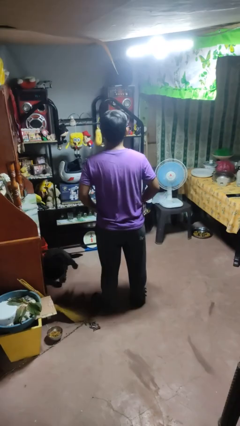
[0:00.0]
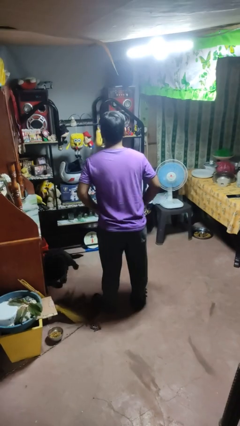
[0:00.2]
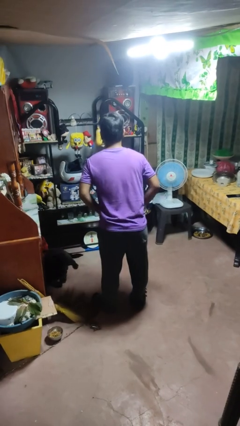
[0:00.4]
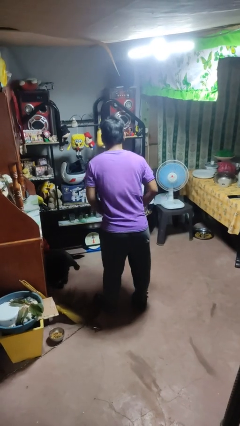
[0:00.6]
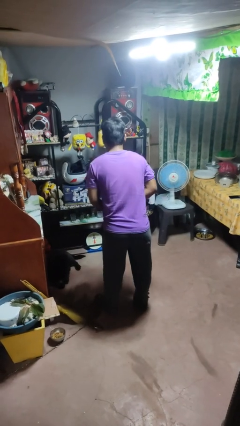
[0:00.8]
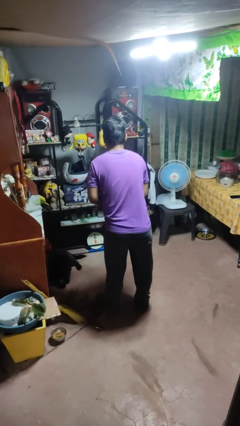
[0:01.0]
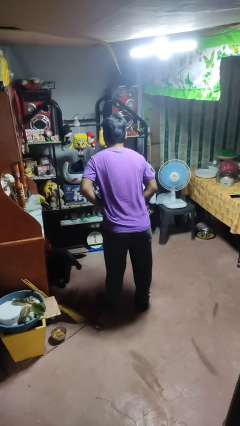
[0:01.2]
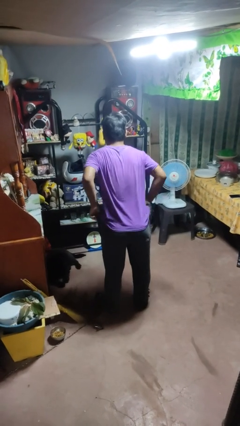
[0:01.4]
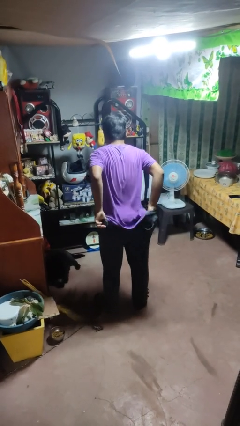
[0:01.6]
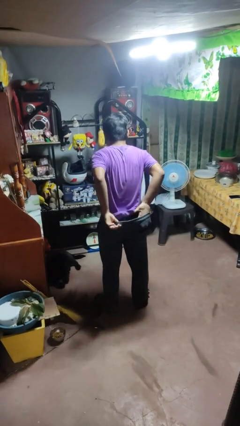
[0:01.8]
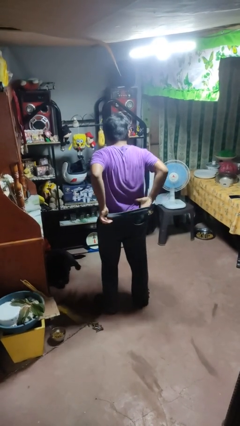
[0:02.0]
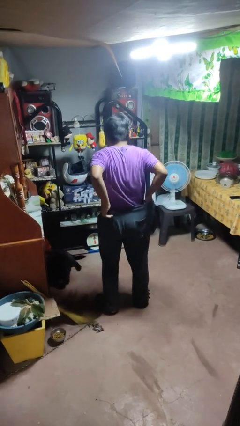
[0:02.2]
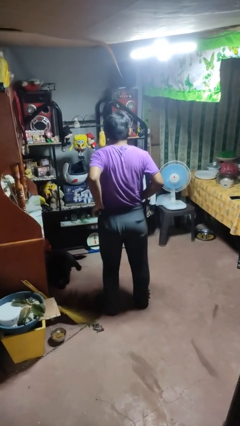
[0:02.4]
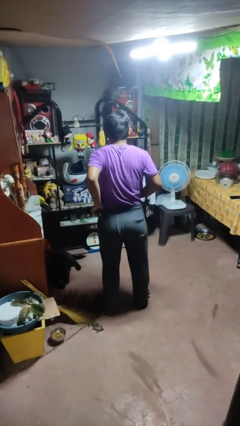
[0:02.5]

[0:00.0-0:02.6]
person tucks in shirt

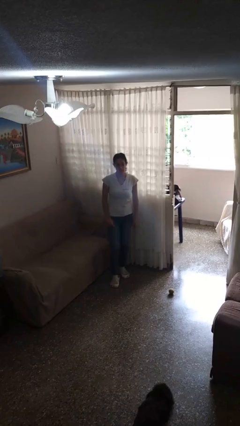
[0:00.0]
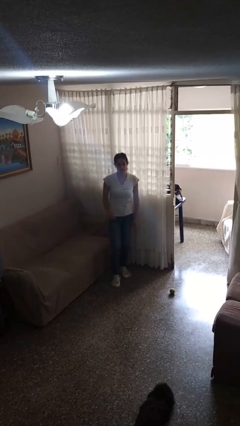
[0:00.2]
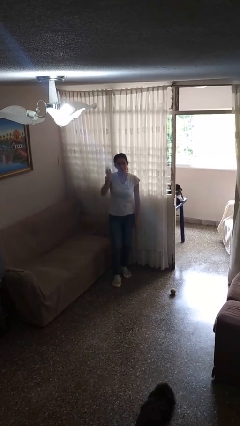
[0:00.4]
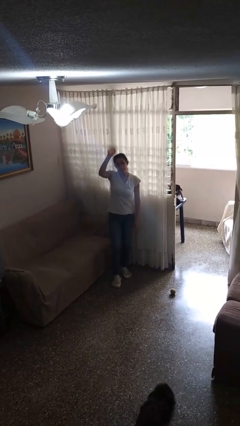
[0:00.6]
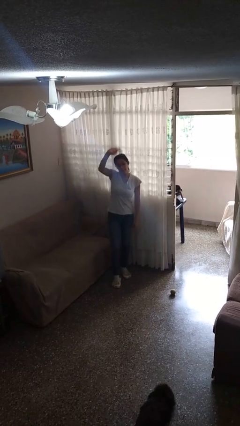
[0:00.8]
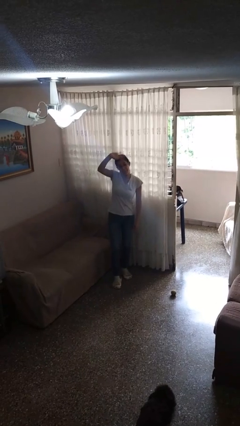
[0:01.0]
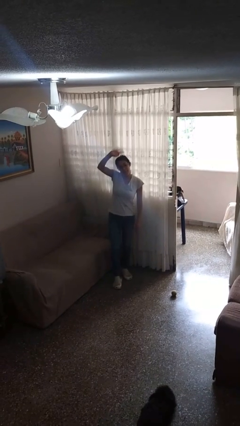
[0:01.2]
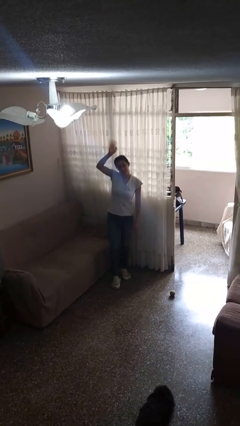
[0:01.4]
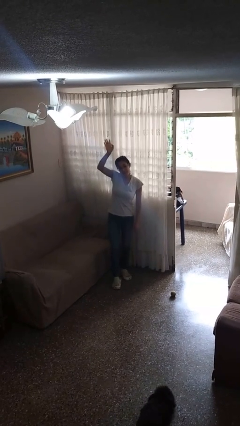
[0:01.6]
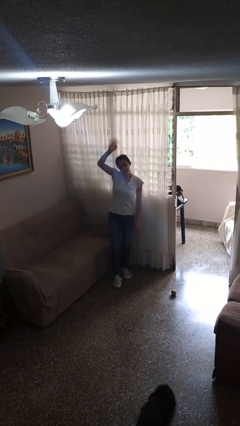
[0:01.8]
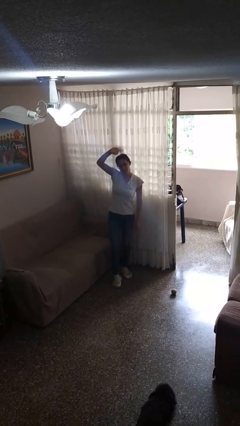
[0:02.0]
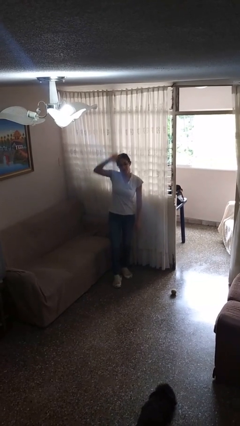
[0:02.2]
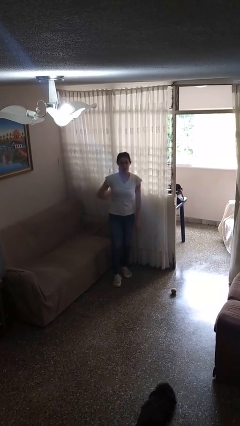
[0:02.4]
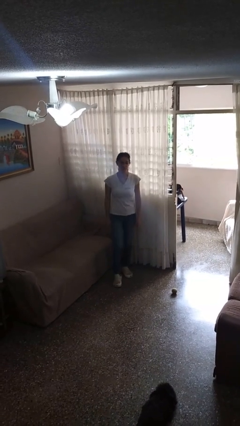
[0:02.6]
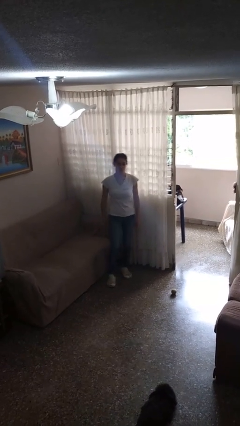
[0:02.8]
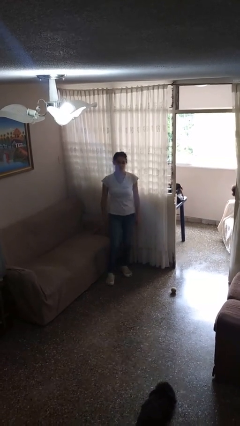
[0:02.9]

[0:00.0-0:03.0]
person waves at person

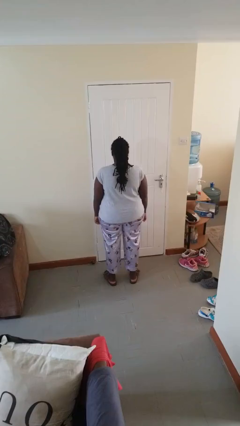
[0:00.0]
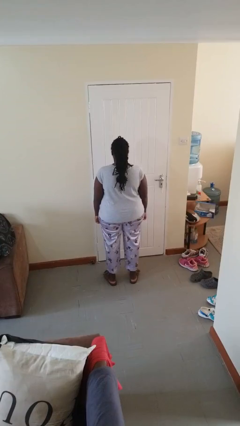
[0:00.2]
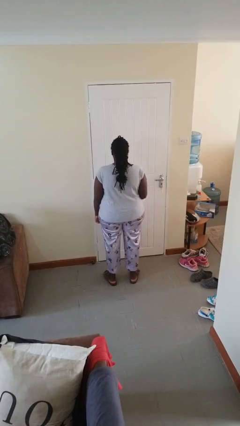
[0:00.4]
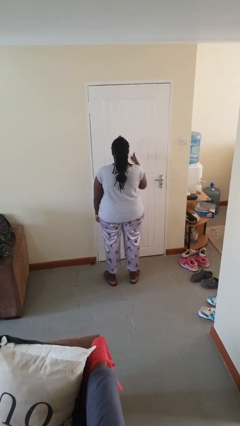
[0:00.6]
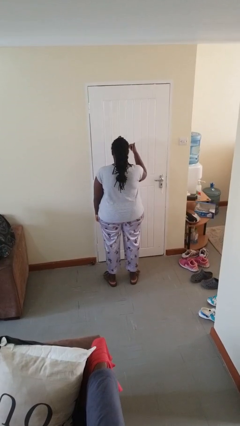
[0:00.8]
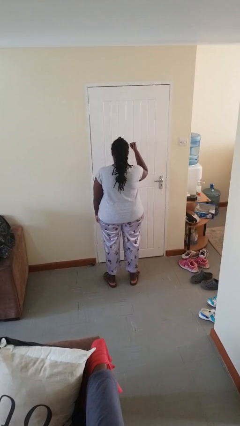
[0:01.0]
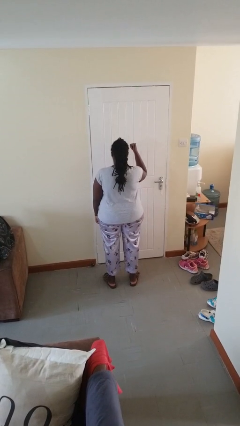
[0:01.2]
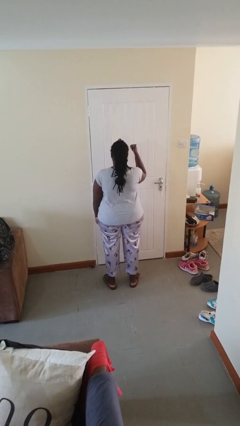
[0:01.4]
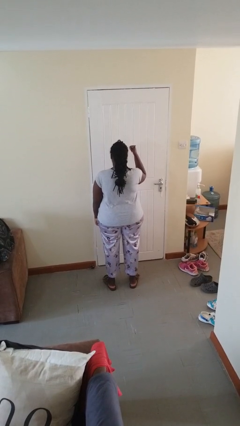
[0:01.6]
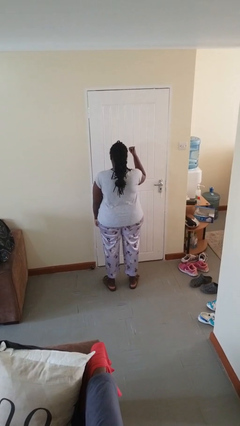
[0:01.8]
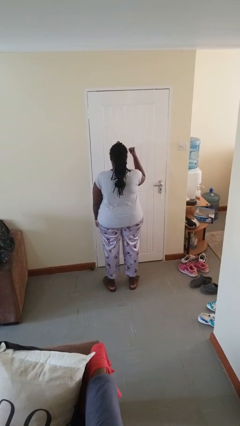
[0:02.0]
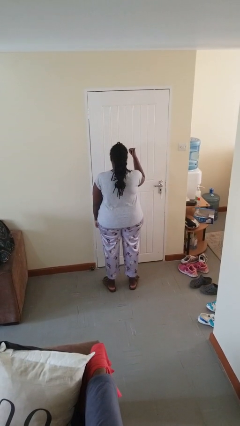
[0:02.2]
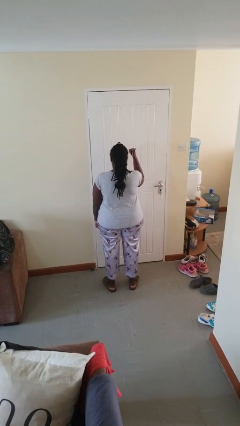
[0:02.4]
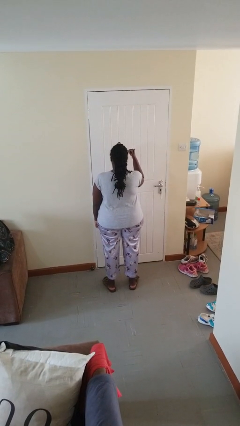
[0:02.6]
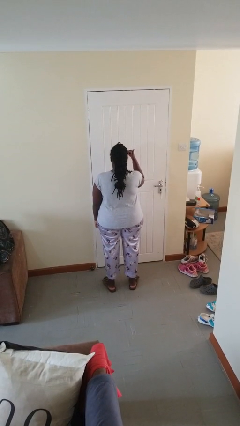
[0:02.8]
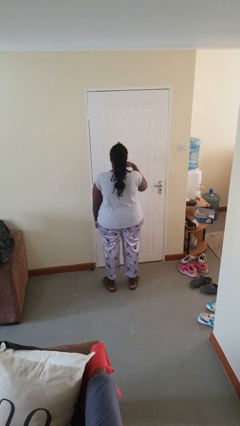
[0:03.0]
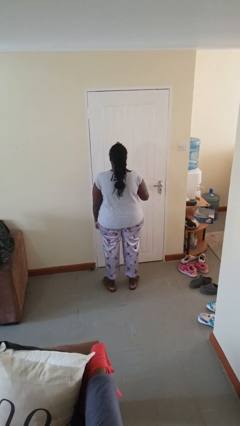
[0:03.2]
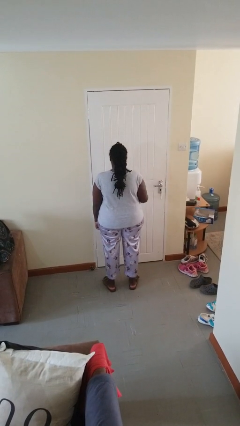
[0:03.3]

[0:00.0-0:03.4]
person gestures thumbs up

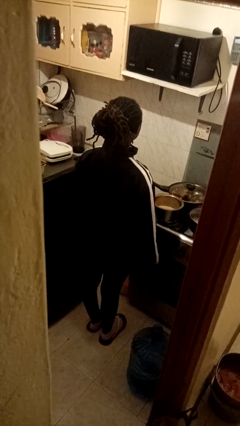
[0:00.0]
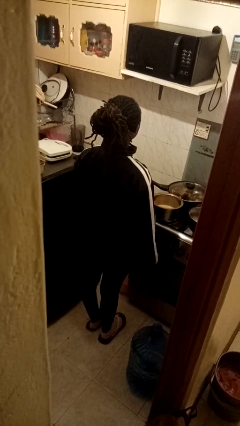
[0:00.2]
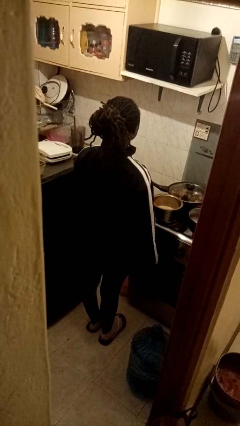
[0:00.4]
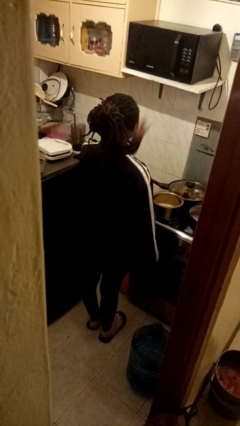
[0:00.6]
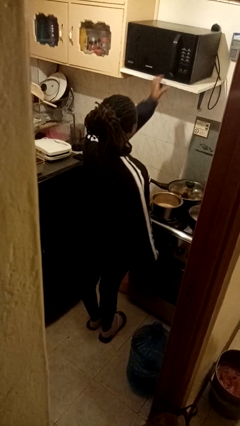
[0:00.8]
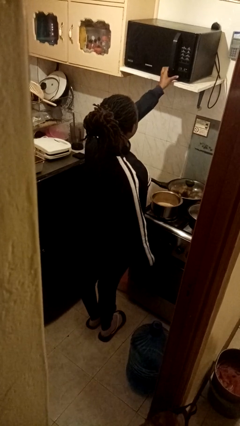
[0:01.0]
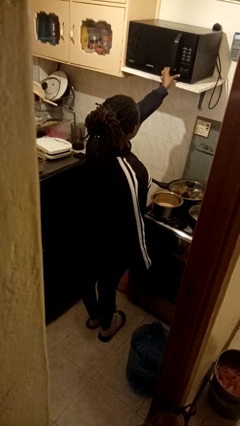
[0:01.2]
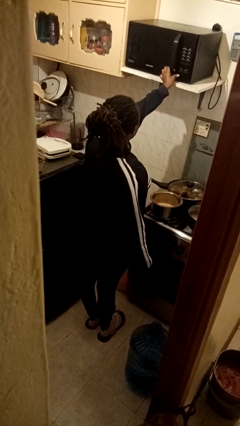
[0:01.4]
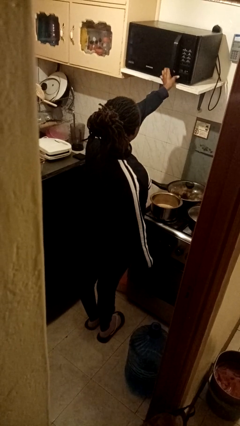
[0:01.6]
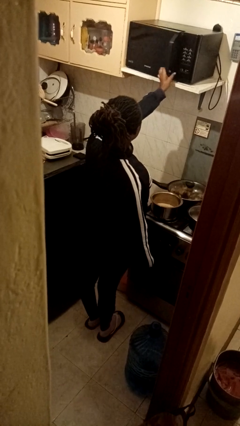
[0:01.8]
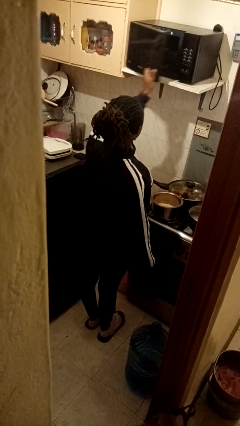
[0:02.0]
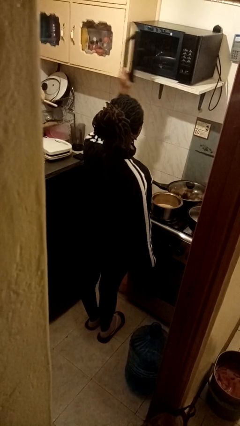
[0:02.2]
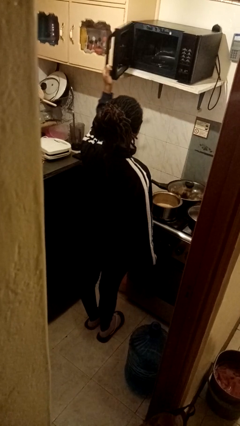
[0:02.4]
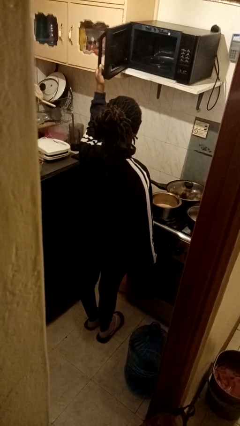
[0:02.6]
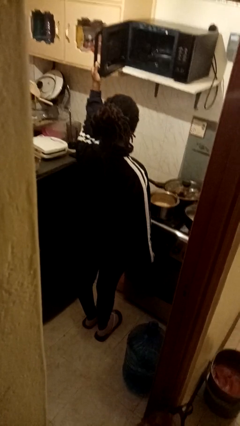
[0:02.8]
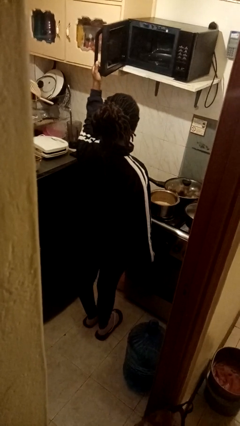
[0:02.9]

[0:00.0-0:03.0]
person opens microwave

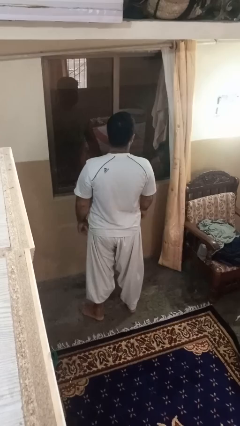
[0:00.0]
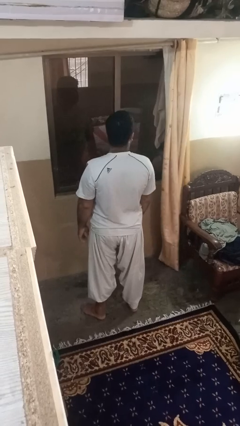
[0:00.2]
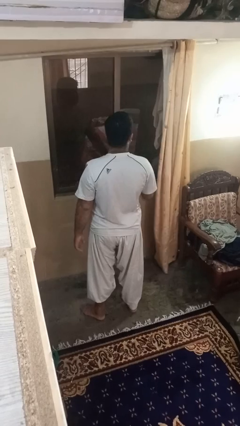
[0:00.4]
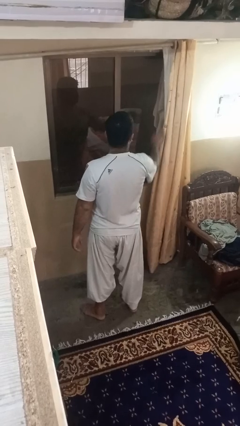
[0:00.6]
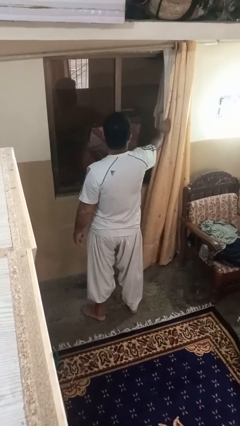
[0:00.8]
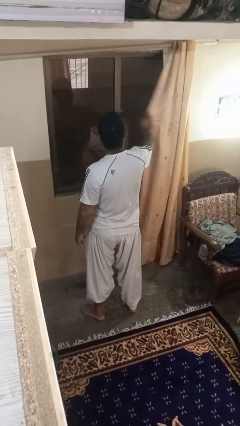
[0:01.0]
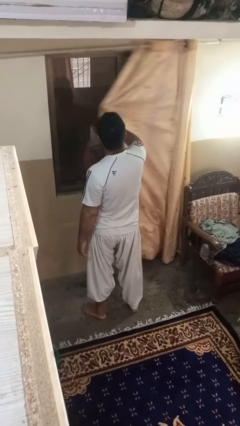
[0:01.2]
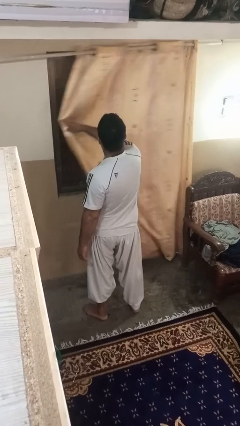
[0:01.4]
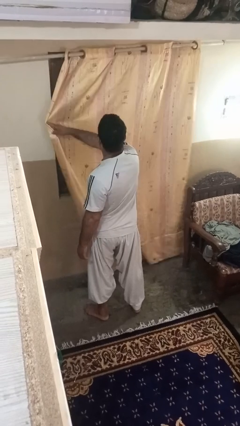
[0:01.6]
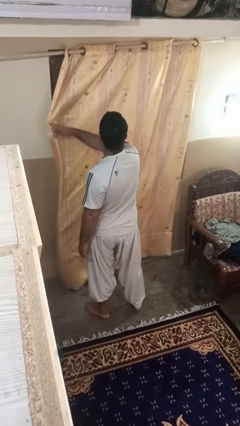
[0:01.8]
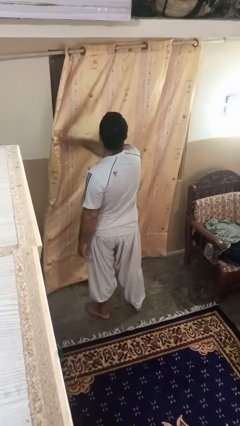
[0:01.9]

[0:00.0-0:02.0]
person closes curtains

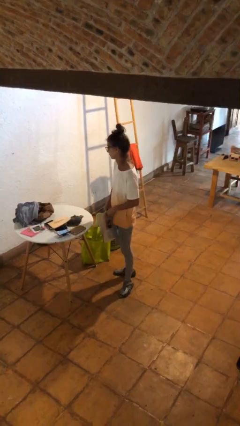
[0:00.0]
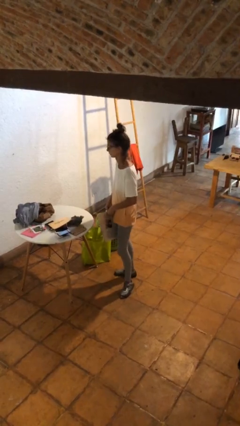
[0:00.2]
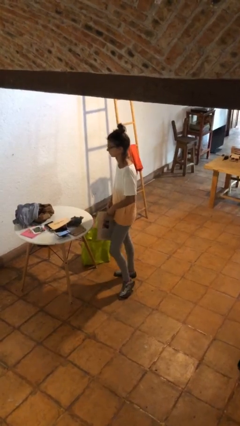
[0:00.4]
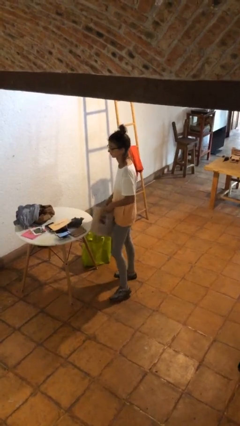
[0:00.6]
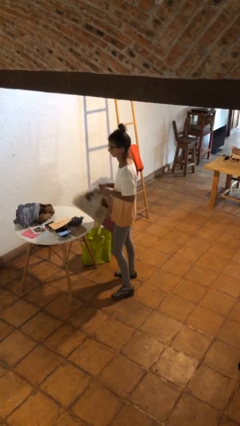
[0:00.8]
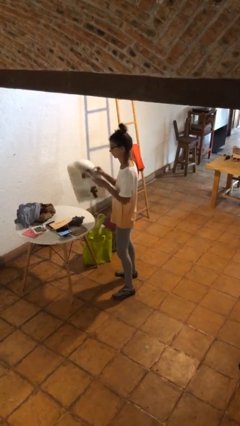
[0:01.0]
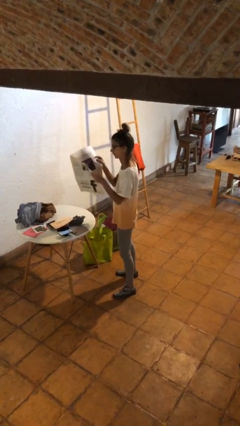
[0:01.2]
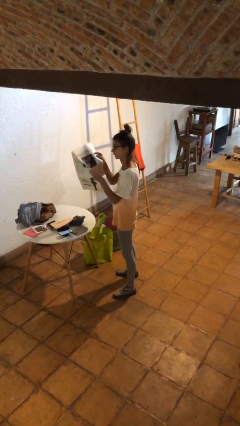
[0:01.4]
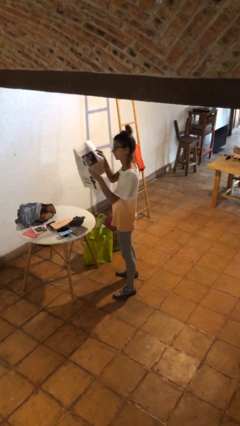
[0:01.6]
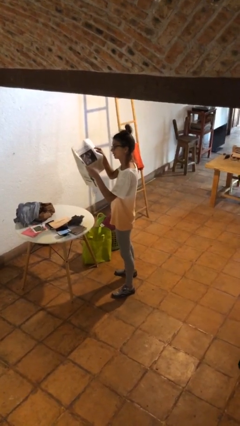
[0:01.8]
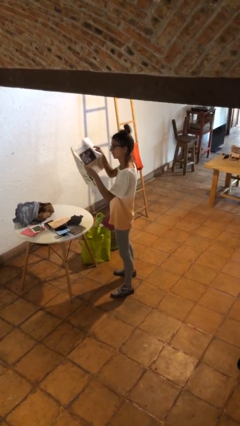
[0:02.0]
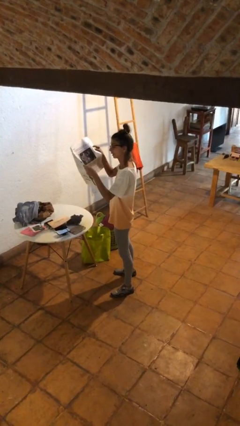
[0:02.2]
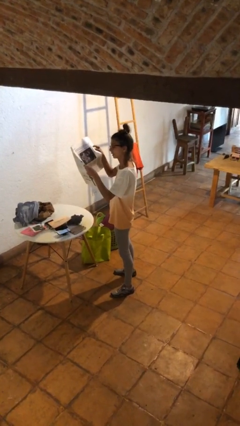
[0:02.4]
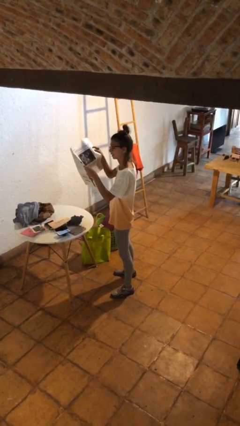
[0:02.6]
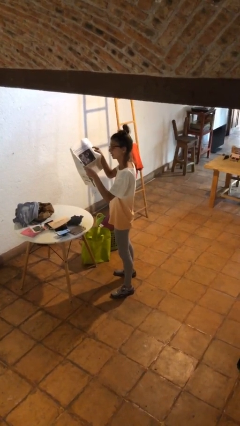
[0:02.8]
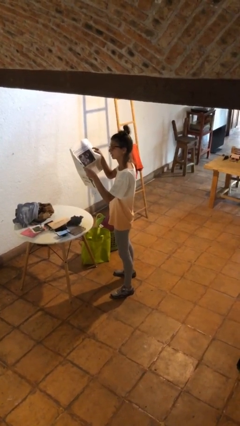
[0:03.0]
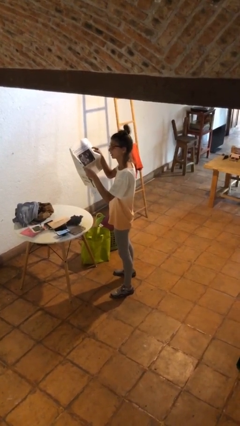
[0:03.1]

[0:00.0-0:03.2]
person reads newspaper
